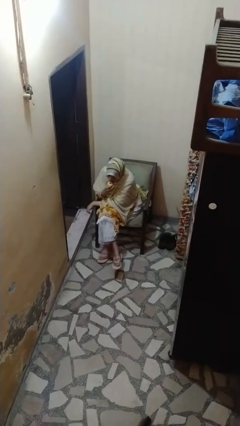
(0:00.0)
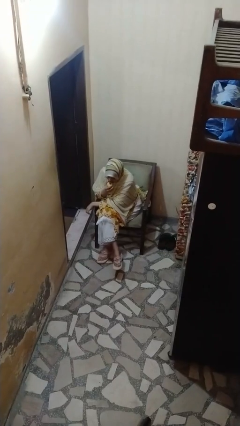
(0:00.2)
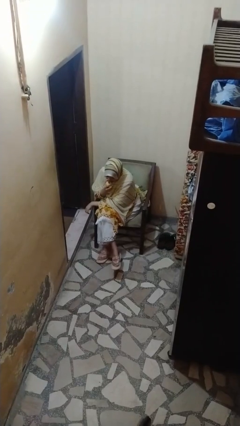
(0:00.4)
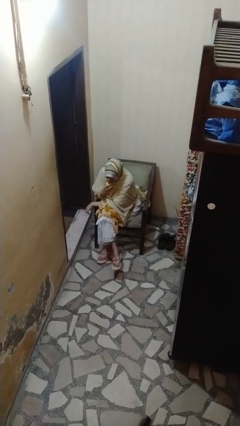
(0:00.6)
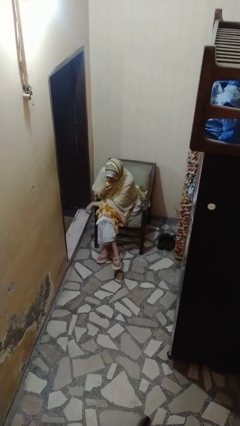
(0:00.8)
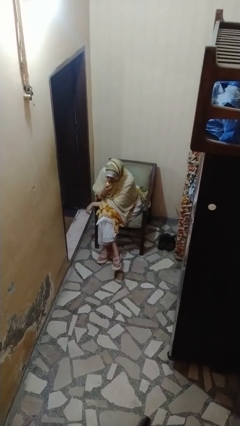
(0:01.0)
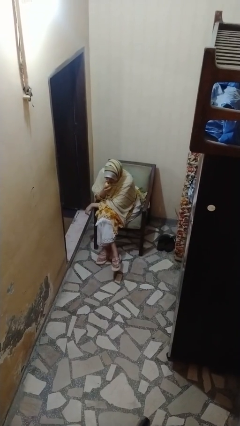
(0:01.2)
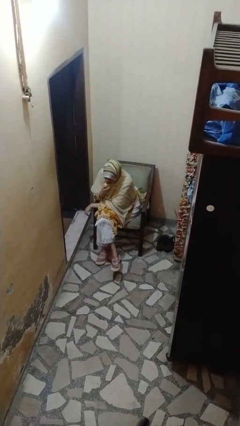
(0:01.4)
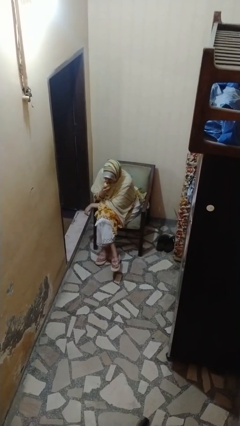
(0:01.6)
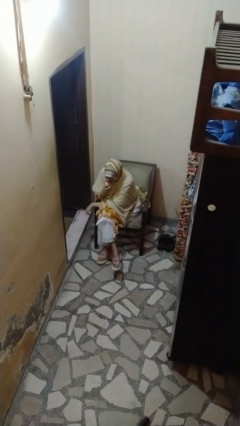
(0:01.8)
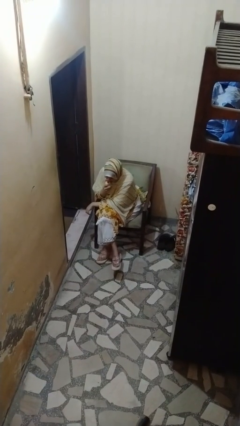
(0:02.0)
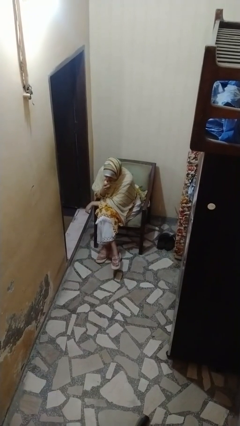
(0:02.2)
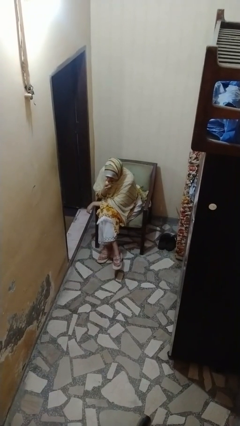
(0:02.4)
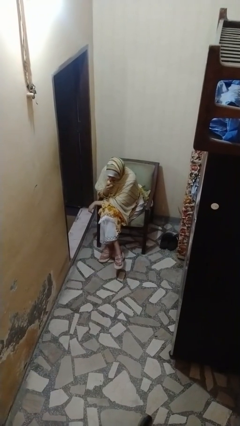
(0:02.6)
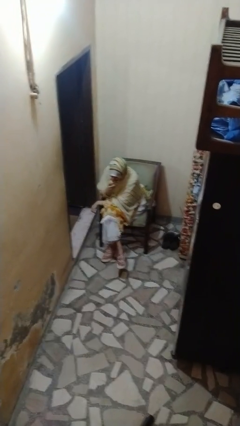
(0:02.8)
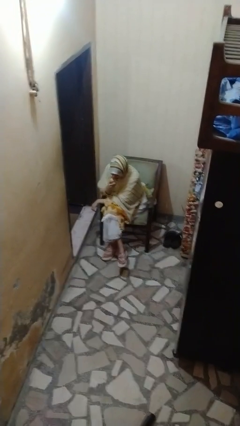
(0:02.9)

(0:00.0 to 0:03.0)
person eats apple

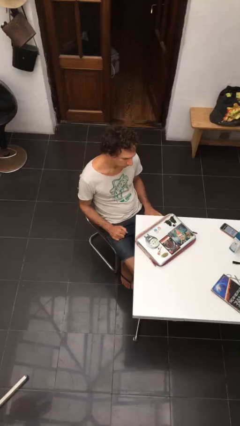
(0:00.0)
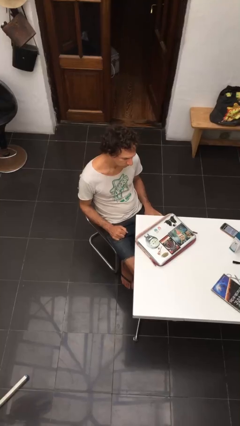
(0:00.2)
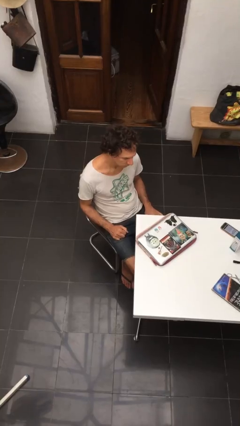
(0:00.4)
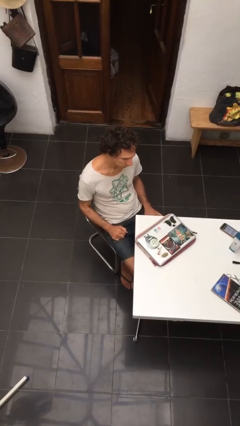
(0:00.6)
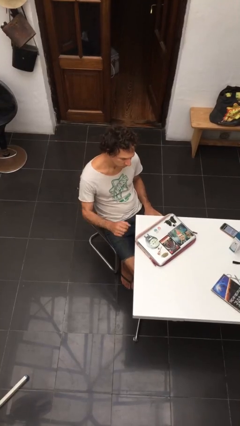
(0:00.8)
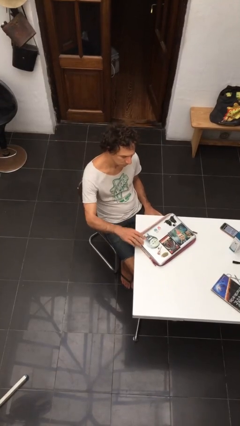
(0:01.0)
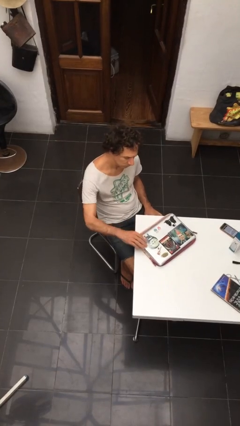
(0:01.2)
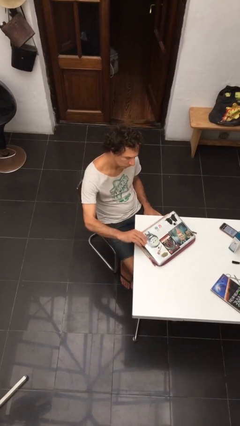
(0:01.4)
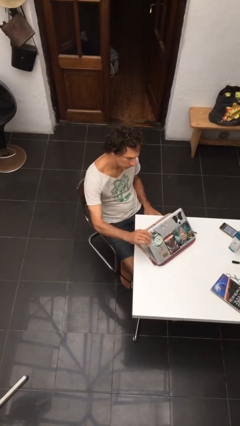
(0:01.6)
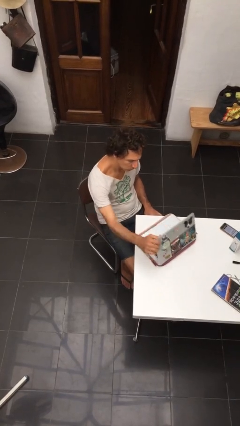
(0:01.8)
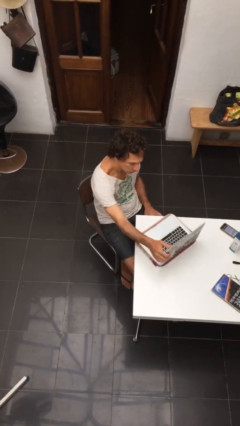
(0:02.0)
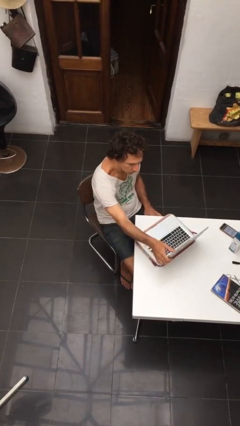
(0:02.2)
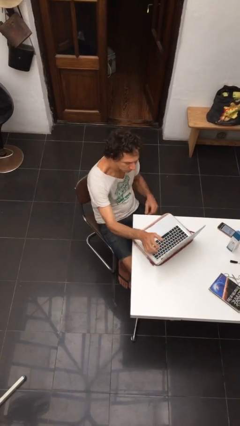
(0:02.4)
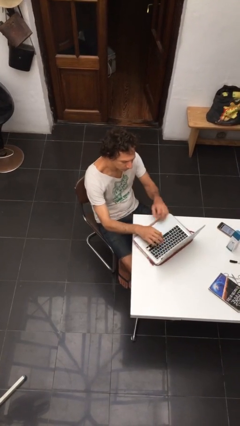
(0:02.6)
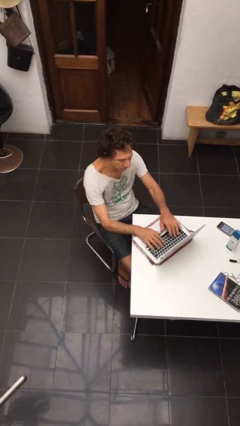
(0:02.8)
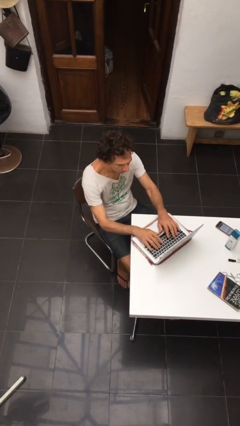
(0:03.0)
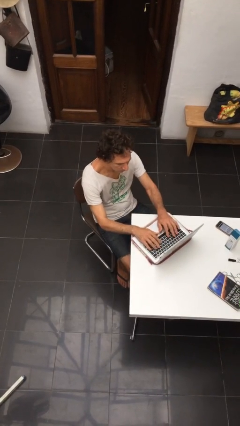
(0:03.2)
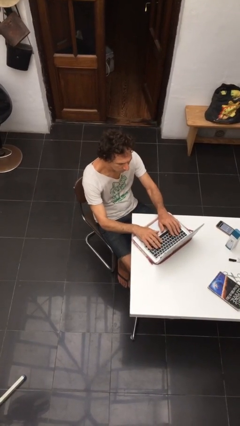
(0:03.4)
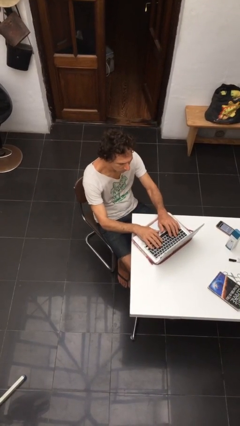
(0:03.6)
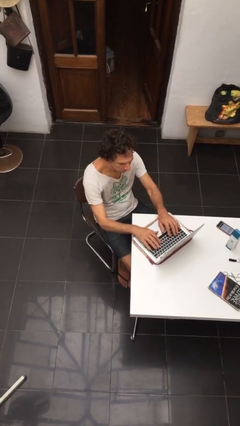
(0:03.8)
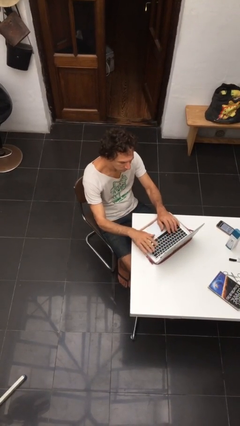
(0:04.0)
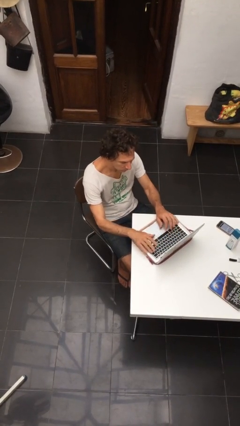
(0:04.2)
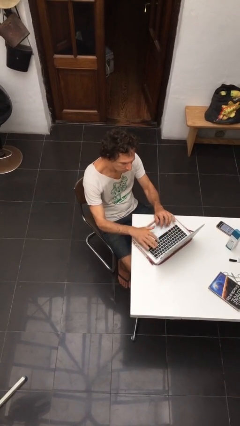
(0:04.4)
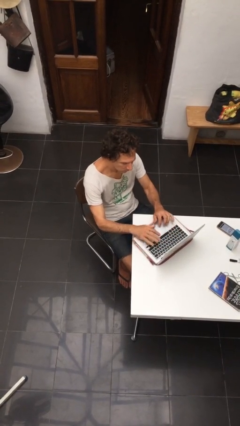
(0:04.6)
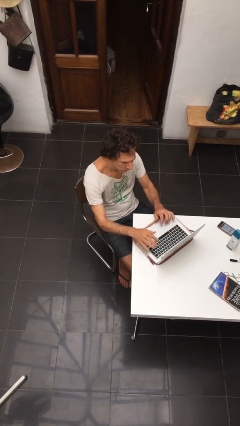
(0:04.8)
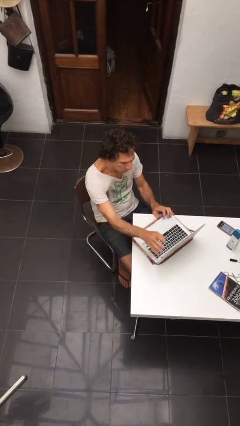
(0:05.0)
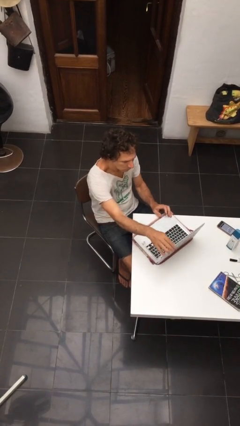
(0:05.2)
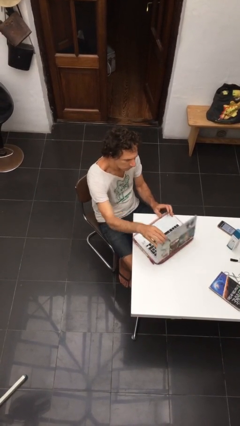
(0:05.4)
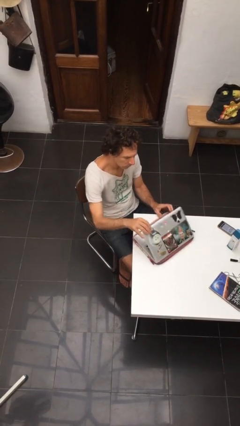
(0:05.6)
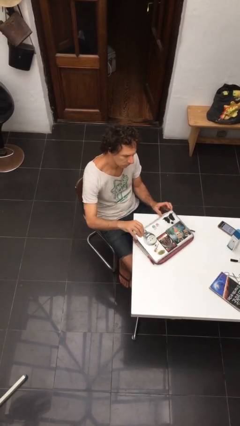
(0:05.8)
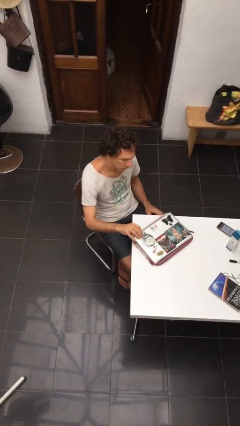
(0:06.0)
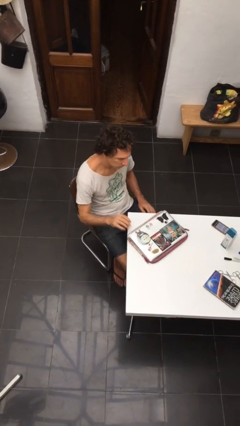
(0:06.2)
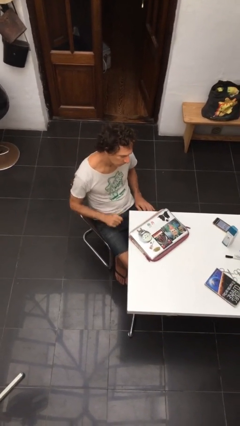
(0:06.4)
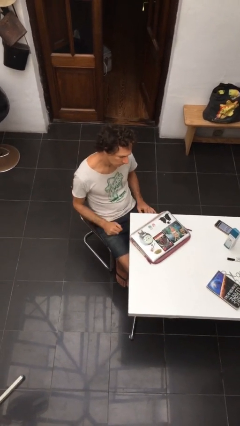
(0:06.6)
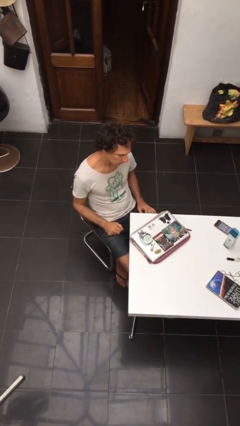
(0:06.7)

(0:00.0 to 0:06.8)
person interacts with laptop

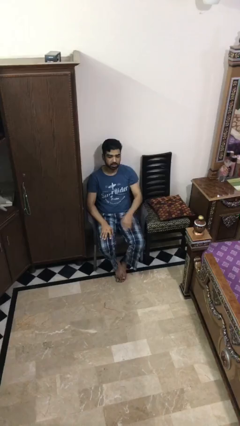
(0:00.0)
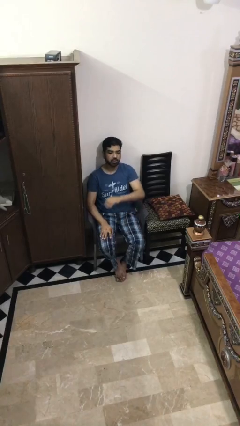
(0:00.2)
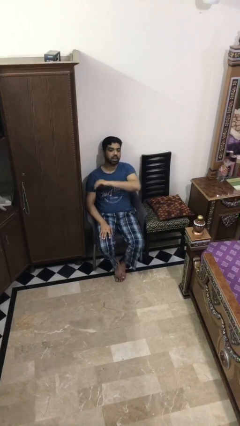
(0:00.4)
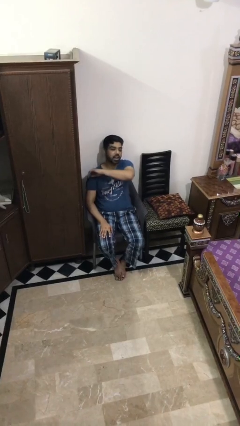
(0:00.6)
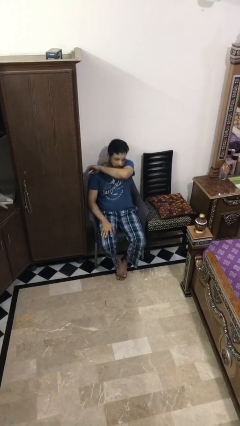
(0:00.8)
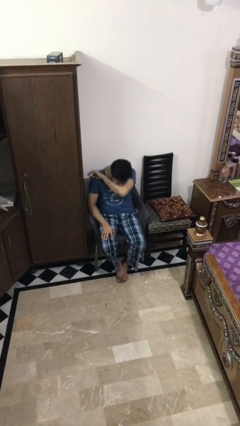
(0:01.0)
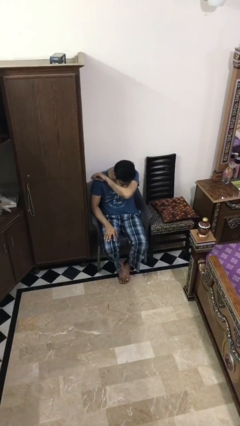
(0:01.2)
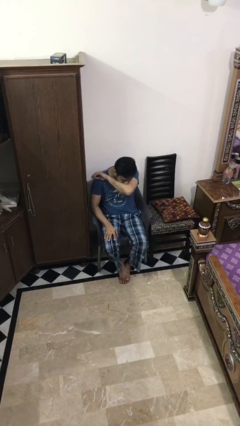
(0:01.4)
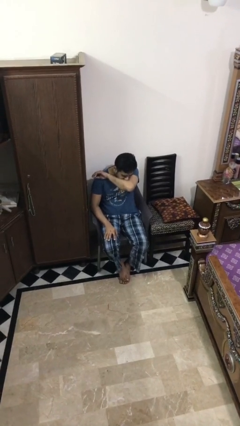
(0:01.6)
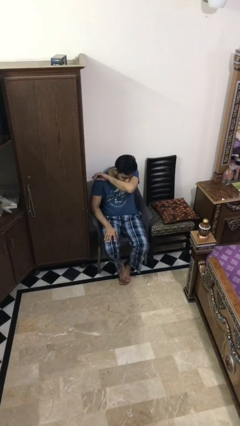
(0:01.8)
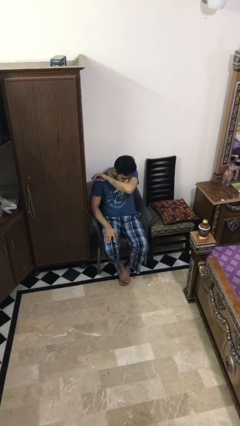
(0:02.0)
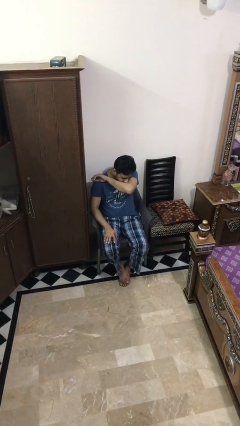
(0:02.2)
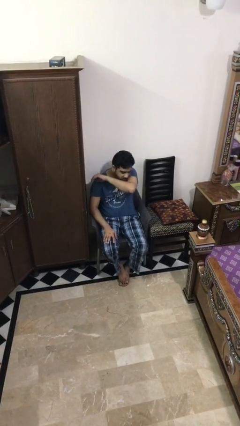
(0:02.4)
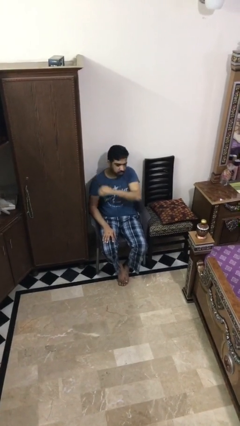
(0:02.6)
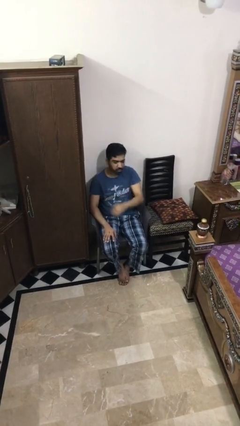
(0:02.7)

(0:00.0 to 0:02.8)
person sneezes into arm

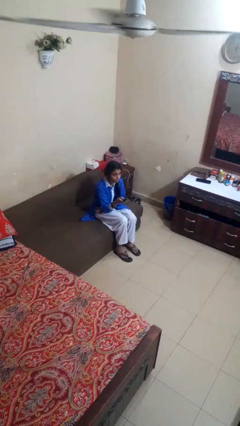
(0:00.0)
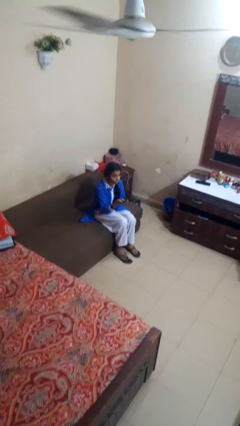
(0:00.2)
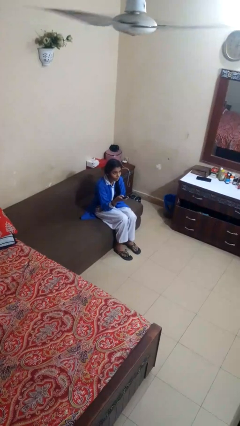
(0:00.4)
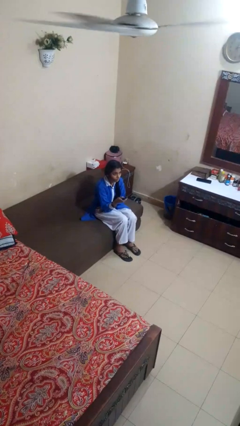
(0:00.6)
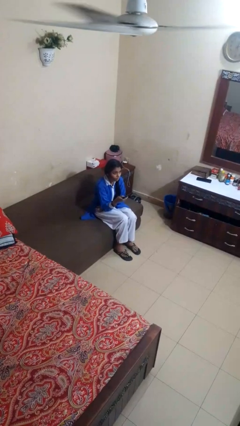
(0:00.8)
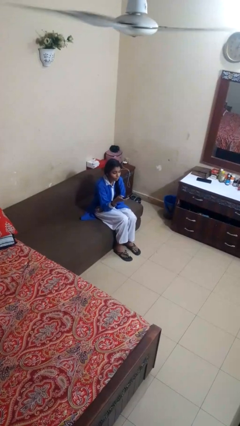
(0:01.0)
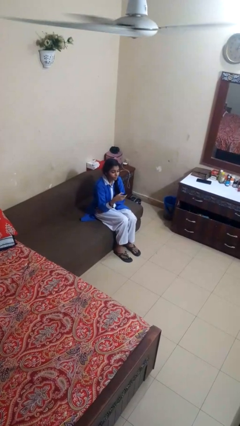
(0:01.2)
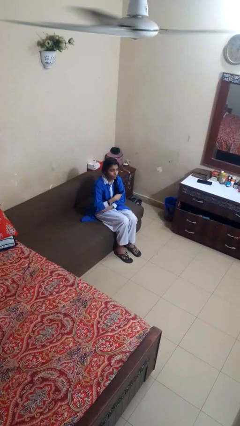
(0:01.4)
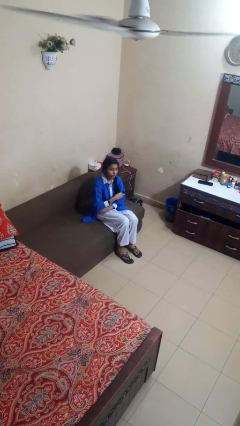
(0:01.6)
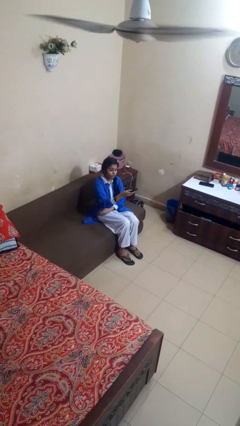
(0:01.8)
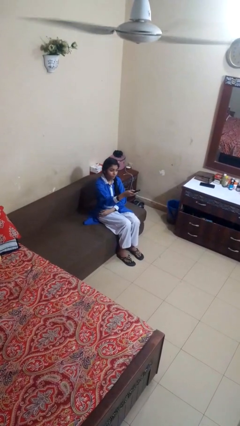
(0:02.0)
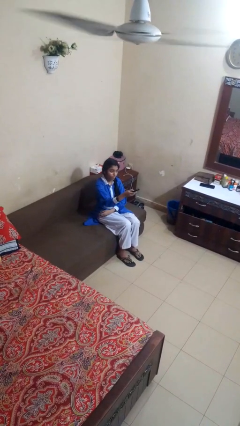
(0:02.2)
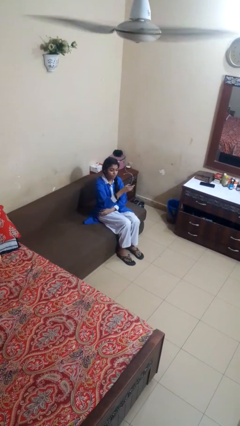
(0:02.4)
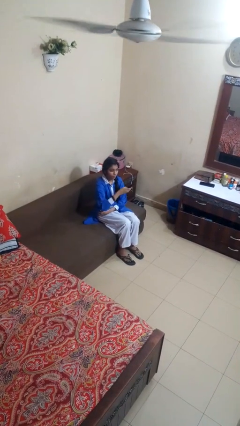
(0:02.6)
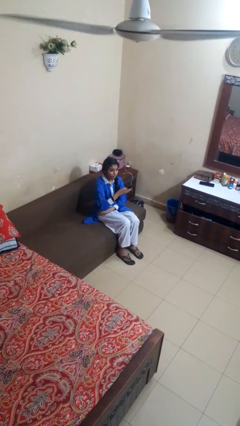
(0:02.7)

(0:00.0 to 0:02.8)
person uses television remote

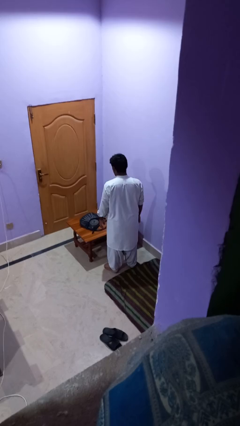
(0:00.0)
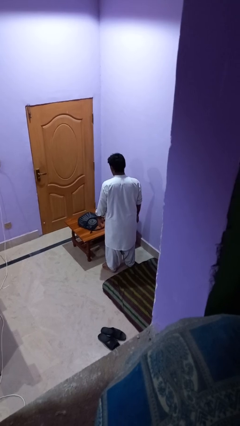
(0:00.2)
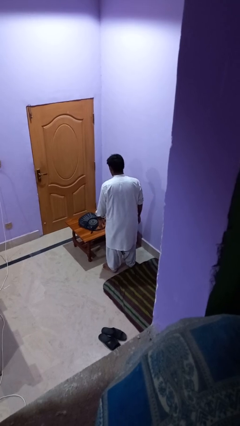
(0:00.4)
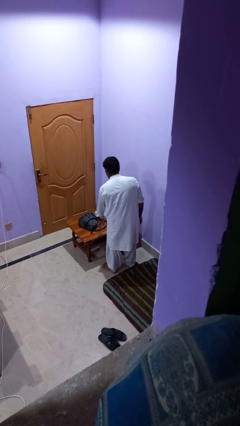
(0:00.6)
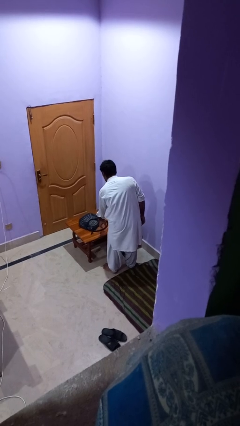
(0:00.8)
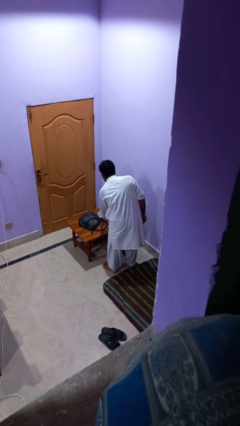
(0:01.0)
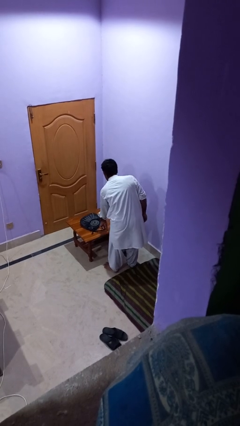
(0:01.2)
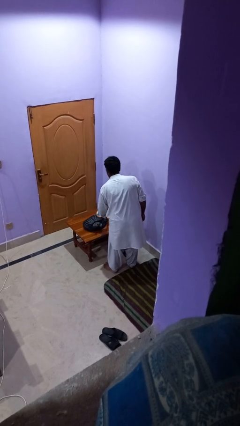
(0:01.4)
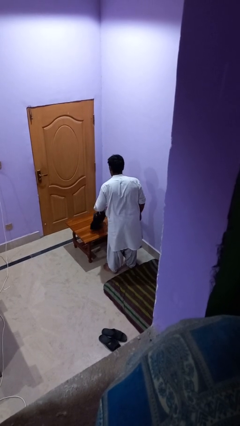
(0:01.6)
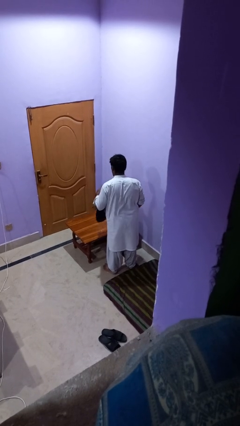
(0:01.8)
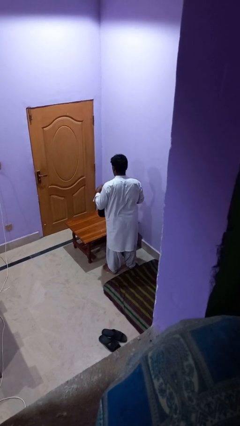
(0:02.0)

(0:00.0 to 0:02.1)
person picks up object from table

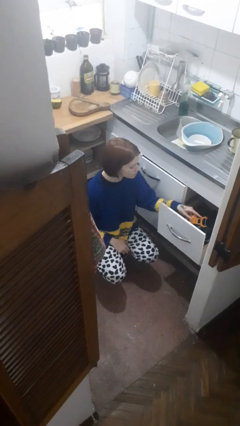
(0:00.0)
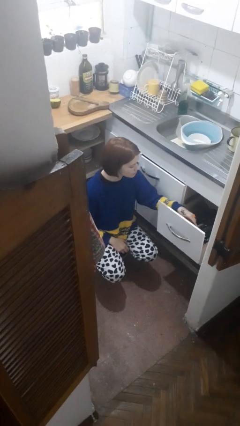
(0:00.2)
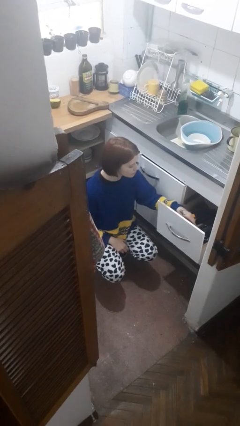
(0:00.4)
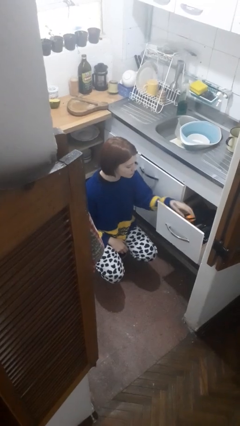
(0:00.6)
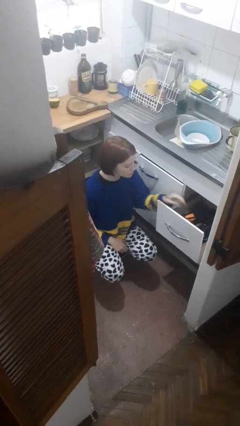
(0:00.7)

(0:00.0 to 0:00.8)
person puts object into kitchen drawer
